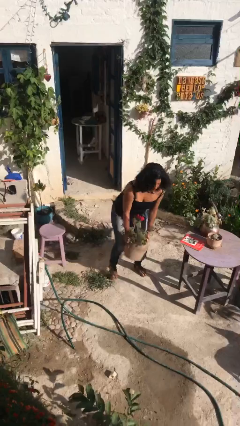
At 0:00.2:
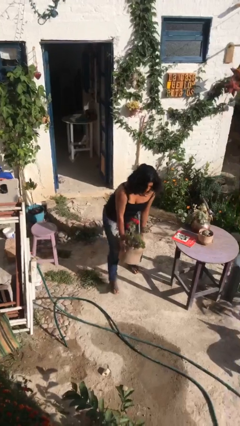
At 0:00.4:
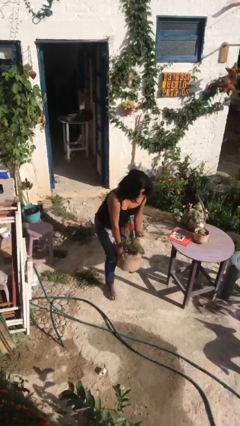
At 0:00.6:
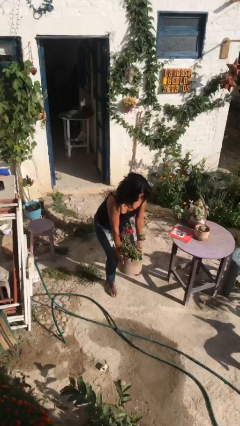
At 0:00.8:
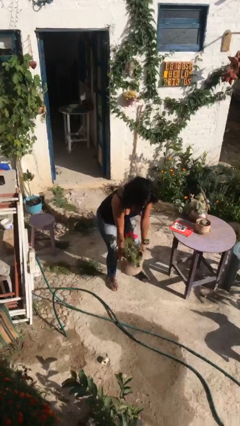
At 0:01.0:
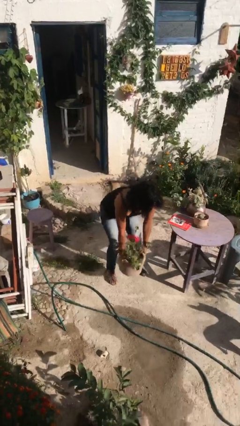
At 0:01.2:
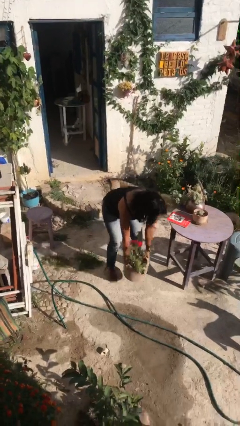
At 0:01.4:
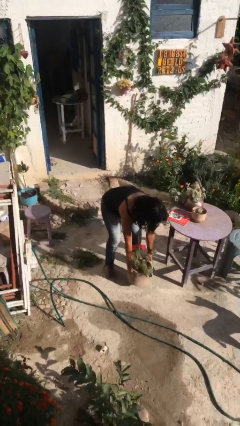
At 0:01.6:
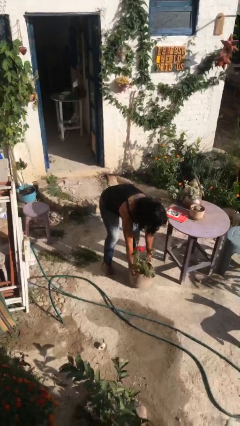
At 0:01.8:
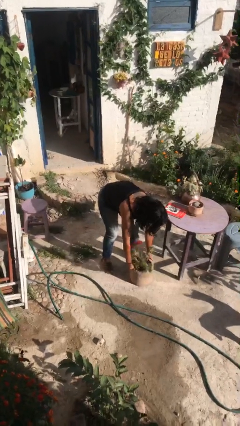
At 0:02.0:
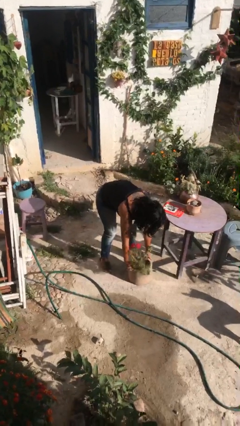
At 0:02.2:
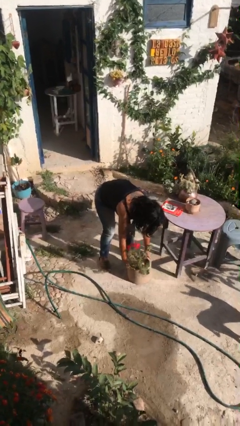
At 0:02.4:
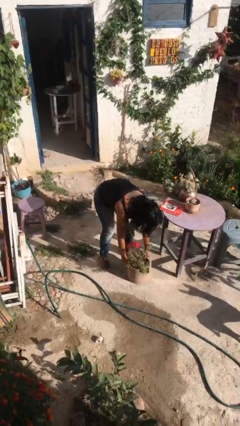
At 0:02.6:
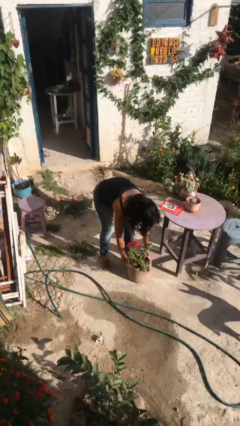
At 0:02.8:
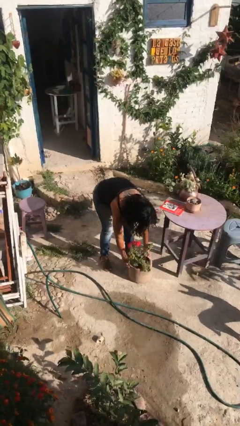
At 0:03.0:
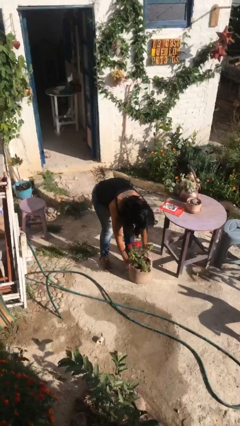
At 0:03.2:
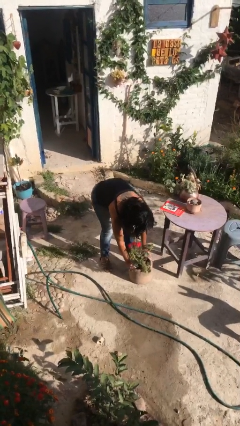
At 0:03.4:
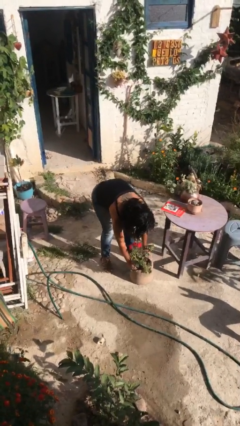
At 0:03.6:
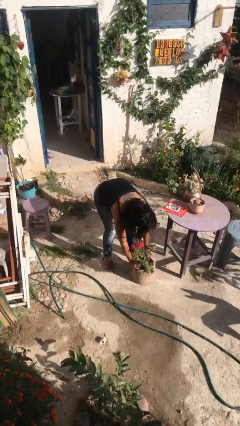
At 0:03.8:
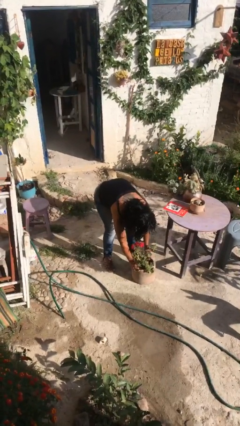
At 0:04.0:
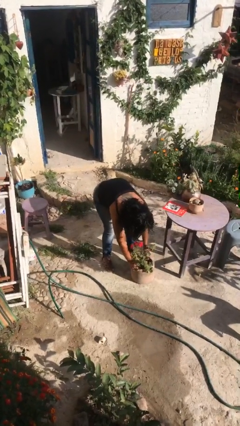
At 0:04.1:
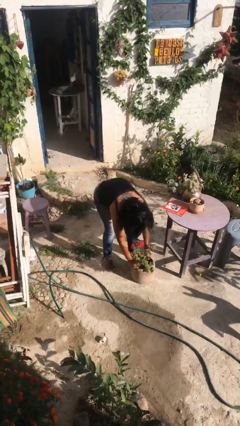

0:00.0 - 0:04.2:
person puts down object on floor

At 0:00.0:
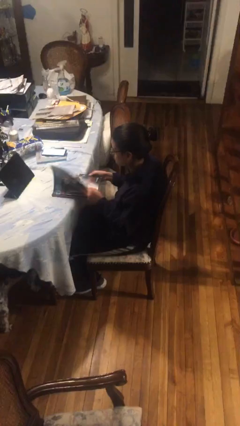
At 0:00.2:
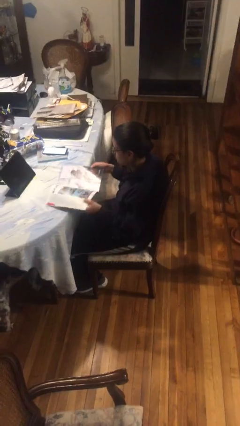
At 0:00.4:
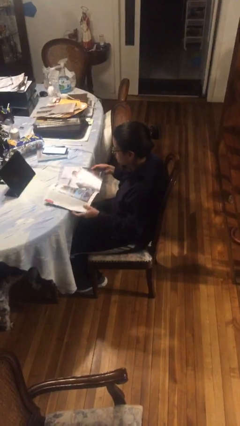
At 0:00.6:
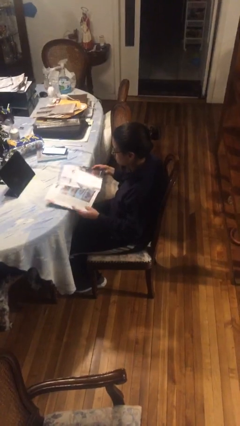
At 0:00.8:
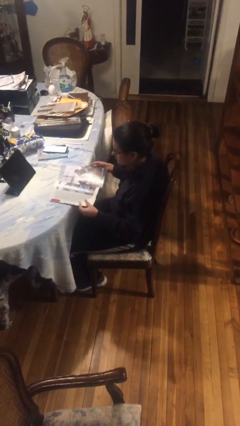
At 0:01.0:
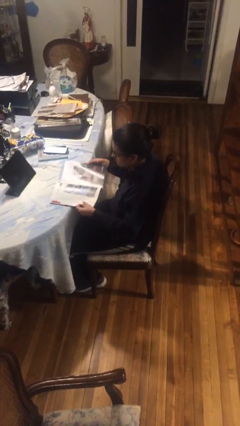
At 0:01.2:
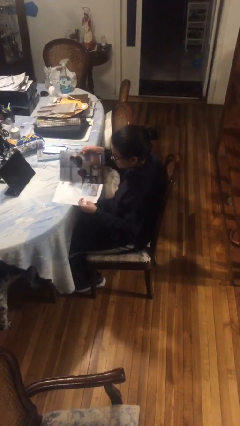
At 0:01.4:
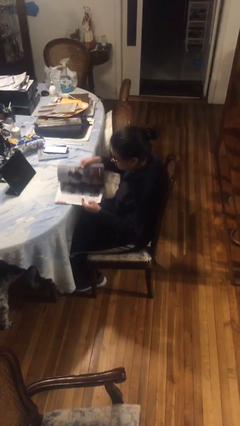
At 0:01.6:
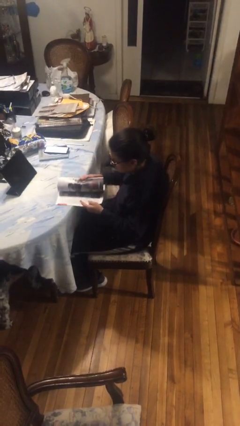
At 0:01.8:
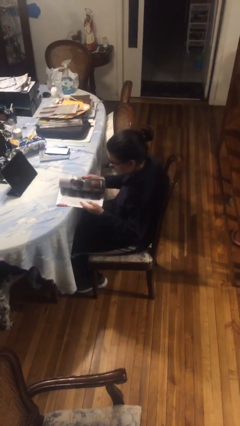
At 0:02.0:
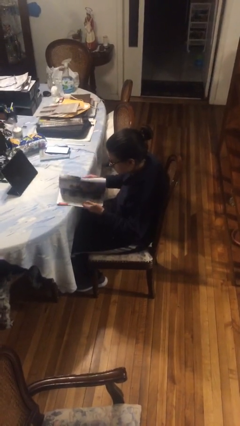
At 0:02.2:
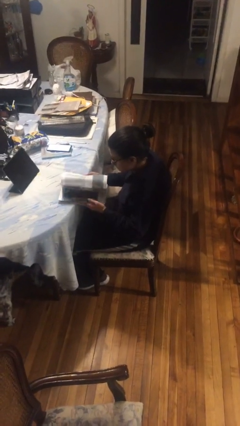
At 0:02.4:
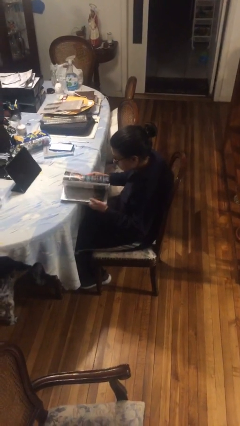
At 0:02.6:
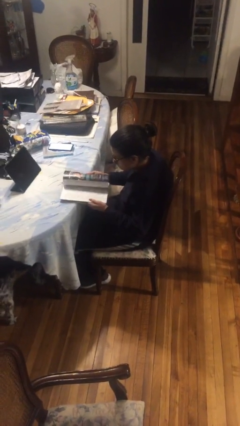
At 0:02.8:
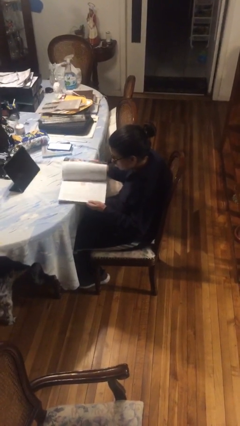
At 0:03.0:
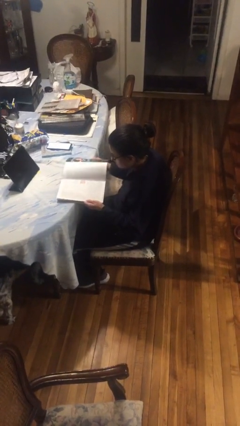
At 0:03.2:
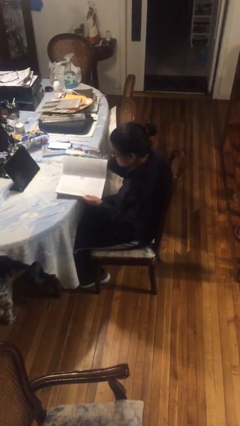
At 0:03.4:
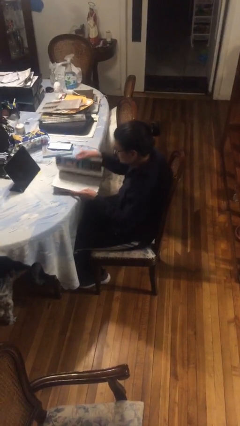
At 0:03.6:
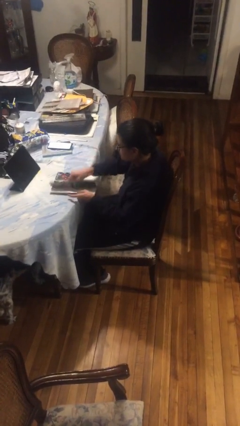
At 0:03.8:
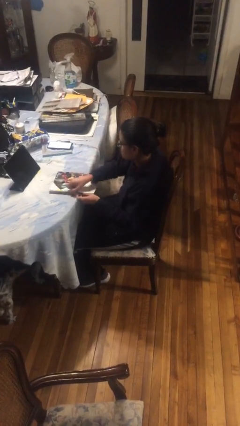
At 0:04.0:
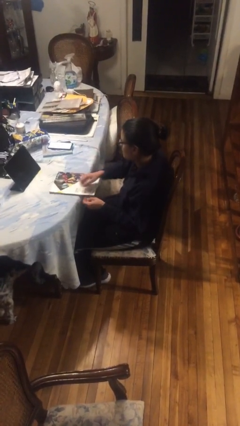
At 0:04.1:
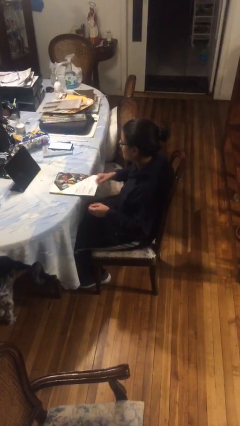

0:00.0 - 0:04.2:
person reads magazine

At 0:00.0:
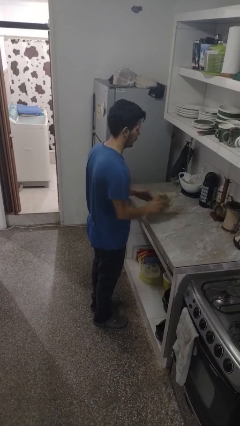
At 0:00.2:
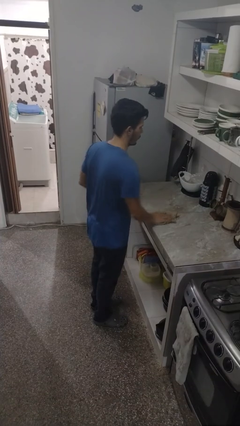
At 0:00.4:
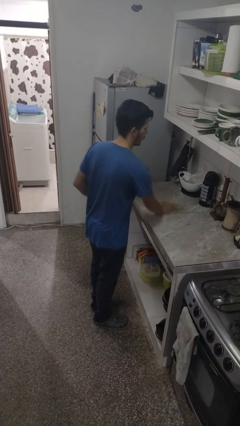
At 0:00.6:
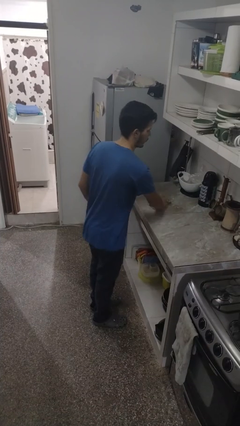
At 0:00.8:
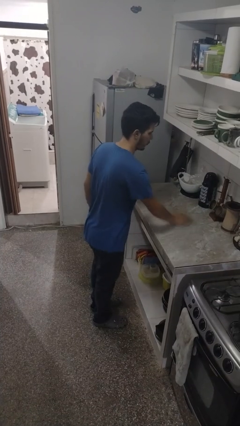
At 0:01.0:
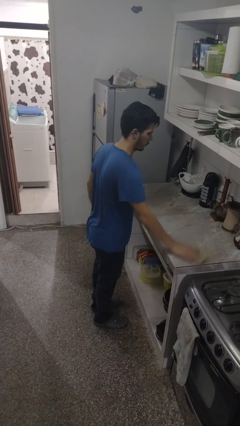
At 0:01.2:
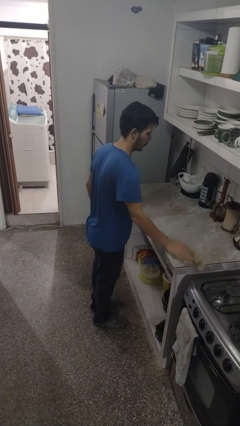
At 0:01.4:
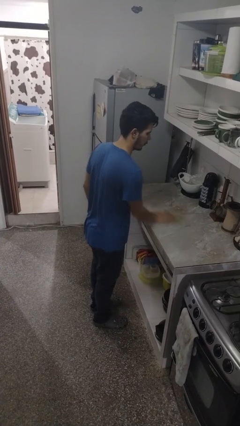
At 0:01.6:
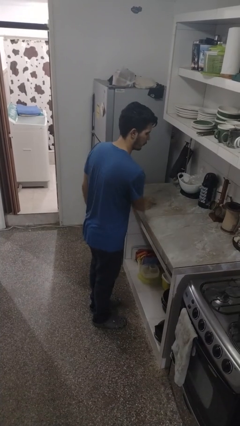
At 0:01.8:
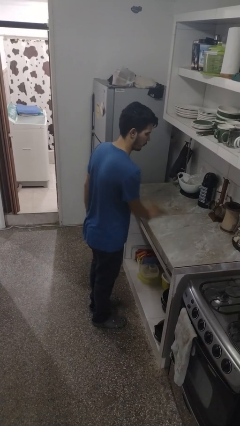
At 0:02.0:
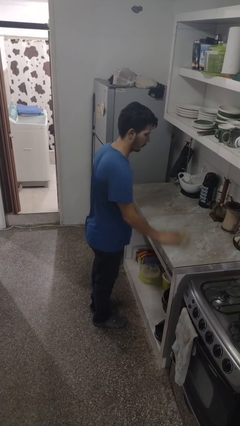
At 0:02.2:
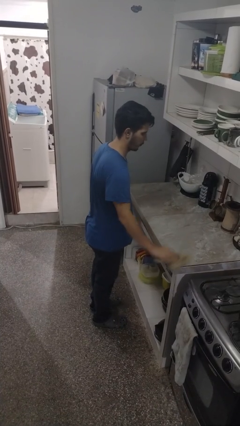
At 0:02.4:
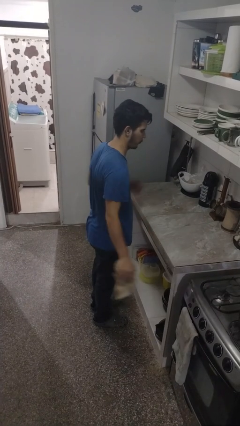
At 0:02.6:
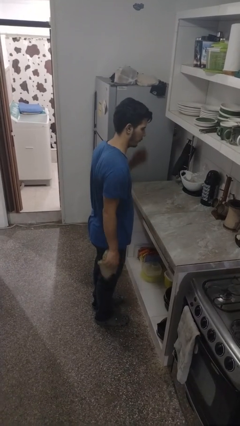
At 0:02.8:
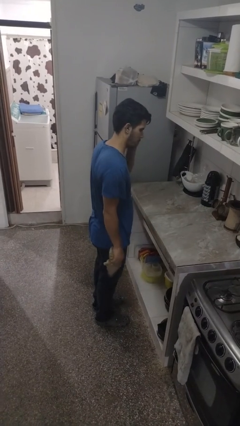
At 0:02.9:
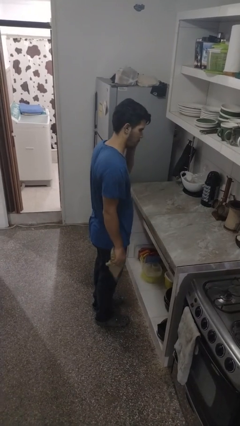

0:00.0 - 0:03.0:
person cleans table with rag

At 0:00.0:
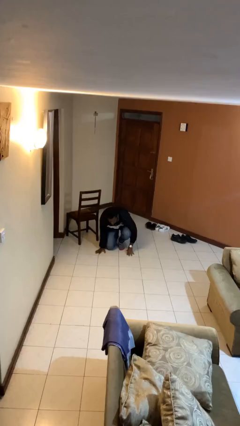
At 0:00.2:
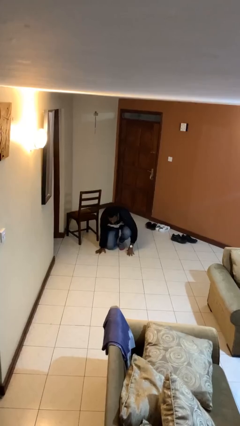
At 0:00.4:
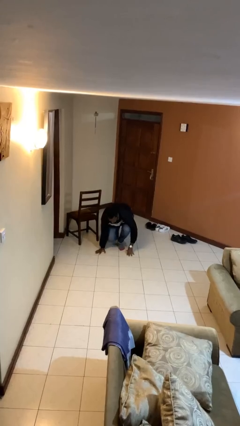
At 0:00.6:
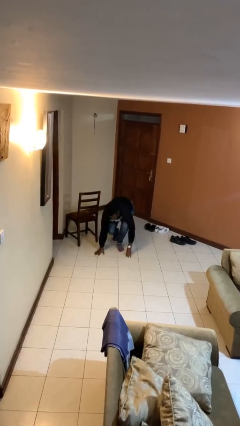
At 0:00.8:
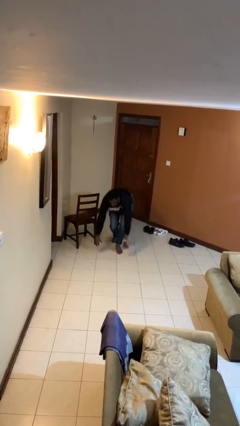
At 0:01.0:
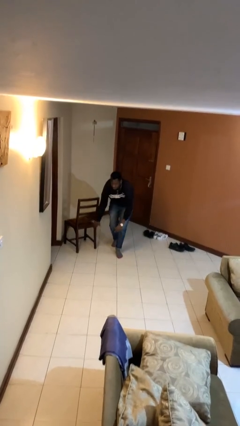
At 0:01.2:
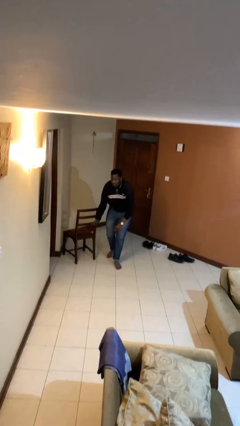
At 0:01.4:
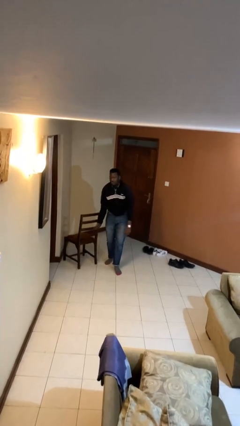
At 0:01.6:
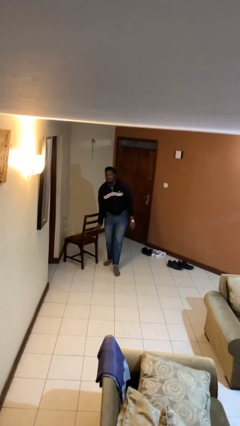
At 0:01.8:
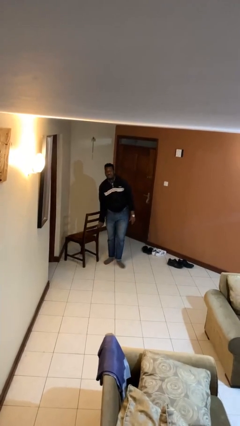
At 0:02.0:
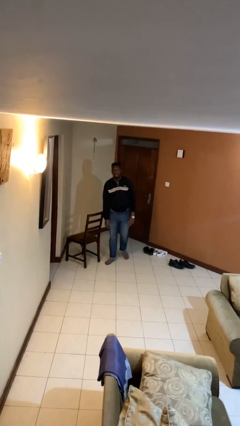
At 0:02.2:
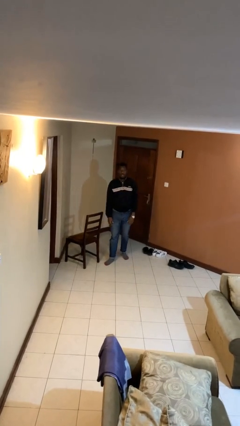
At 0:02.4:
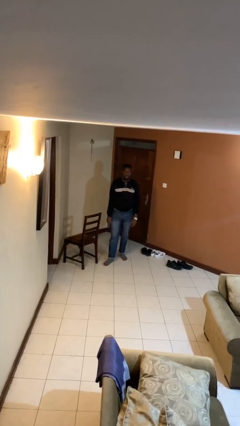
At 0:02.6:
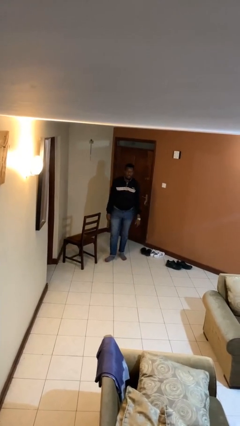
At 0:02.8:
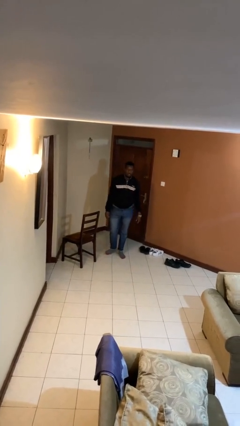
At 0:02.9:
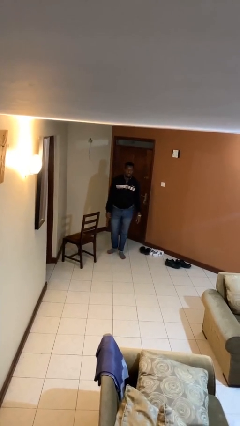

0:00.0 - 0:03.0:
person stands up from floor

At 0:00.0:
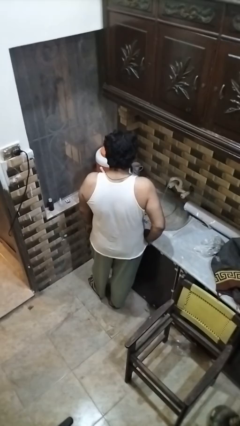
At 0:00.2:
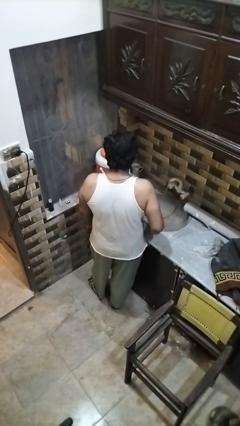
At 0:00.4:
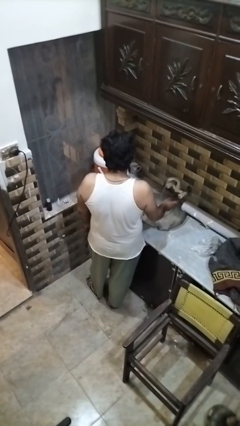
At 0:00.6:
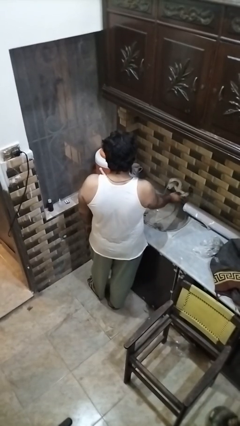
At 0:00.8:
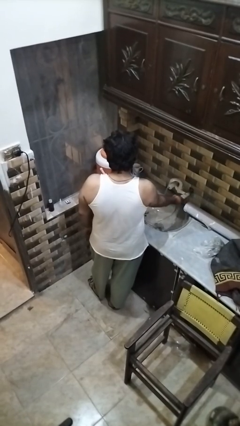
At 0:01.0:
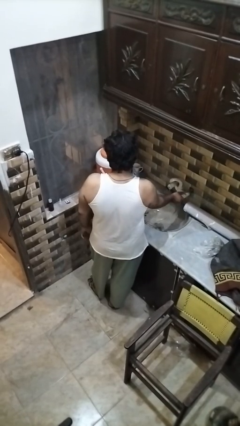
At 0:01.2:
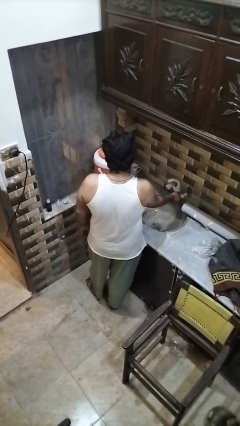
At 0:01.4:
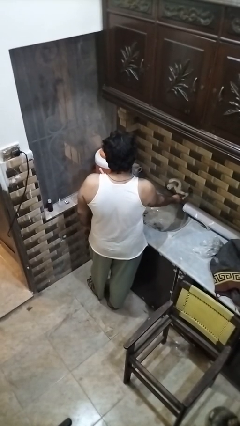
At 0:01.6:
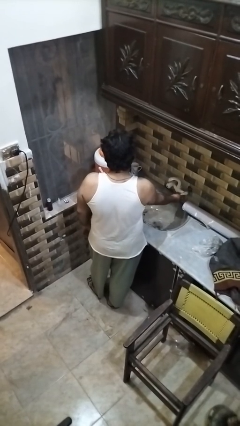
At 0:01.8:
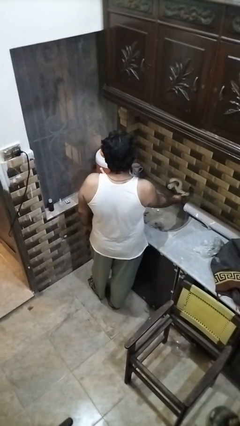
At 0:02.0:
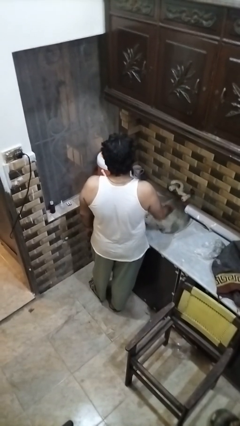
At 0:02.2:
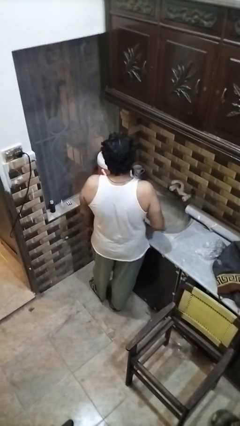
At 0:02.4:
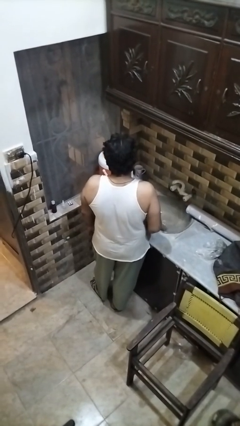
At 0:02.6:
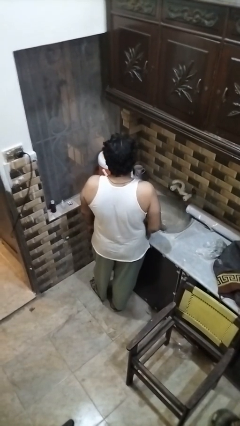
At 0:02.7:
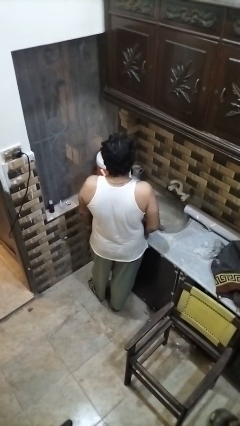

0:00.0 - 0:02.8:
person turns off faucet
